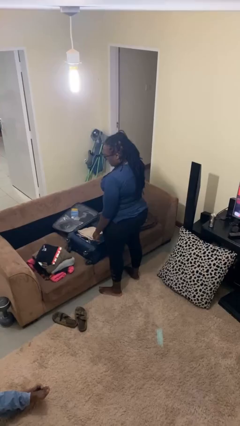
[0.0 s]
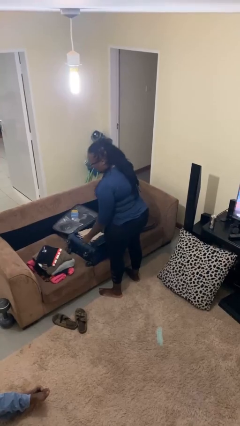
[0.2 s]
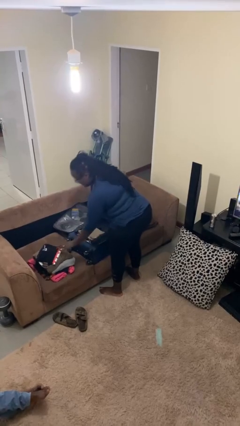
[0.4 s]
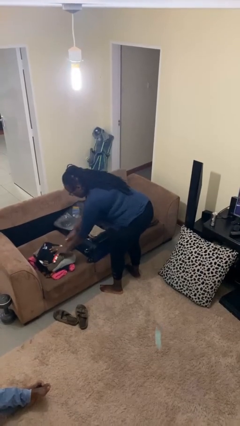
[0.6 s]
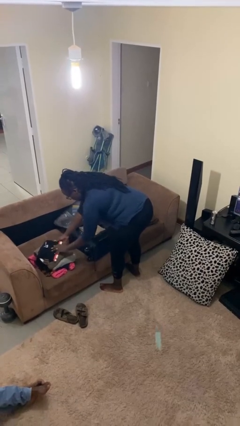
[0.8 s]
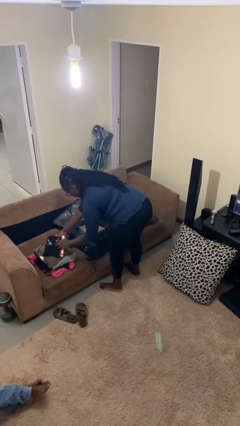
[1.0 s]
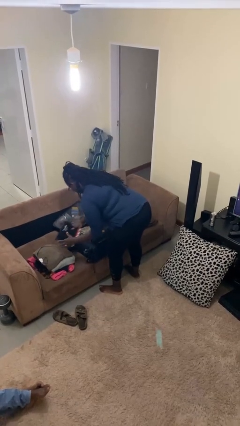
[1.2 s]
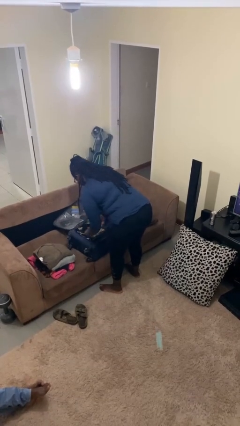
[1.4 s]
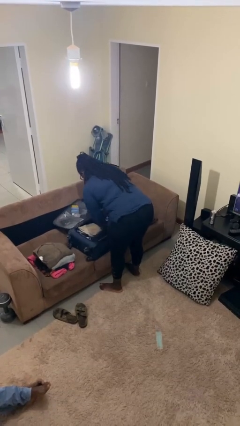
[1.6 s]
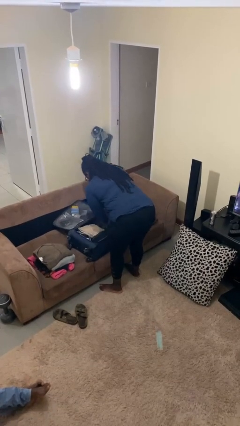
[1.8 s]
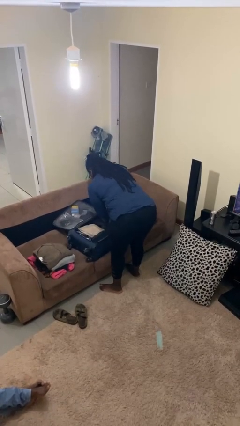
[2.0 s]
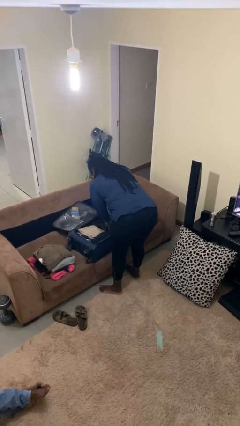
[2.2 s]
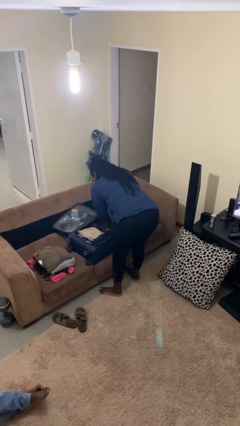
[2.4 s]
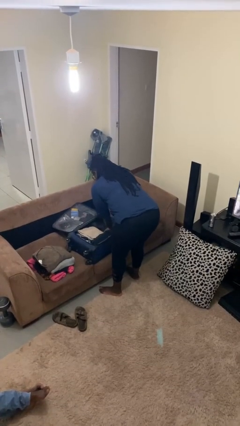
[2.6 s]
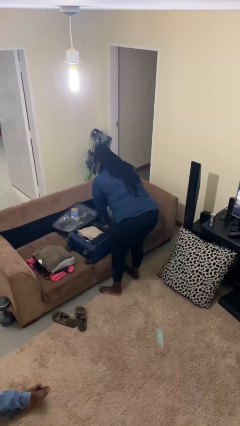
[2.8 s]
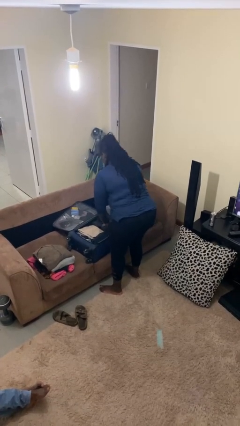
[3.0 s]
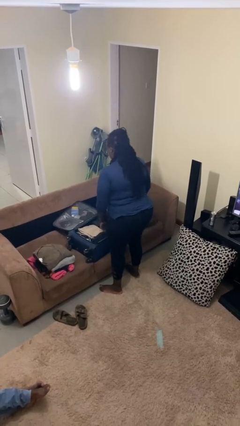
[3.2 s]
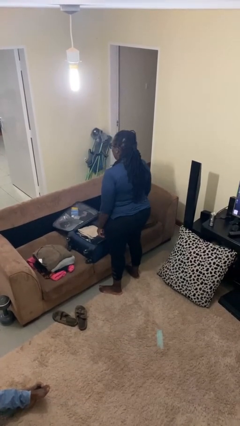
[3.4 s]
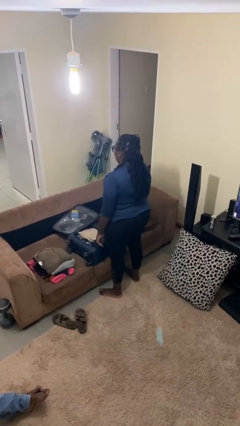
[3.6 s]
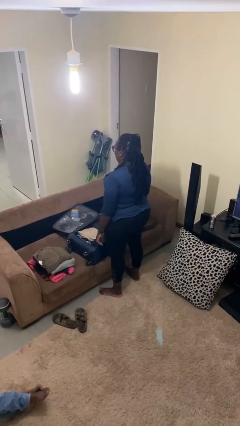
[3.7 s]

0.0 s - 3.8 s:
person loads clothes into suitcase

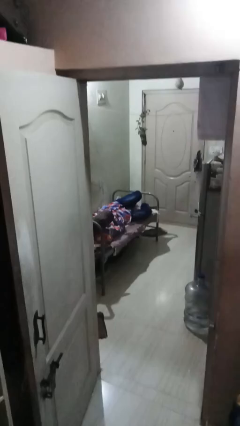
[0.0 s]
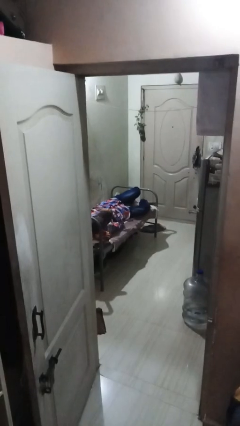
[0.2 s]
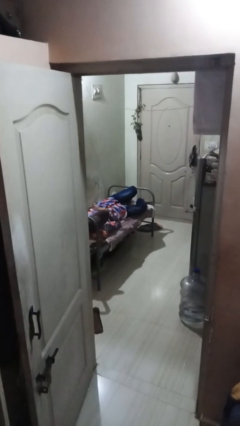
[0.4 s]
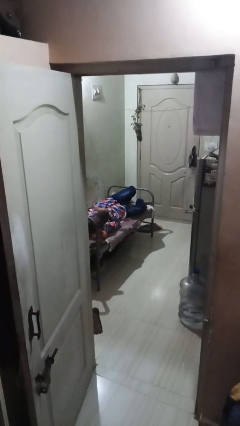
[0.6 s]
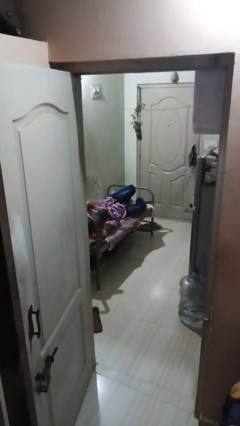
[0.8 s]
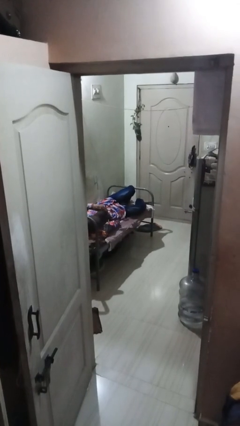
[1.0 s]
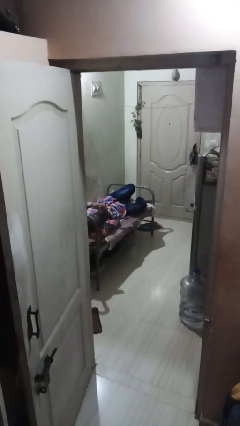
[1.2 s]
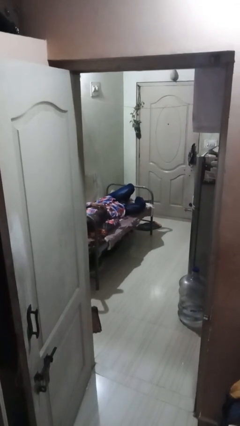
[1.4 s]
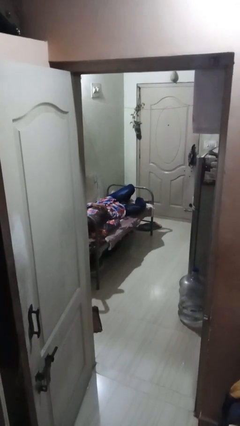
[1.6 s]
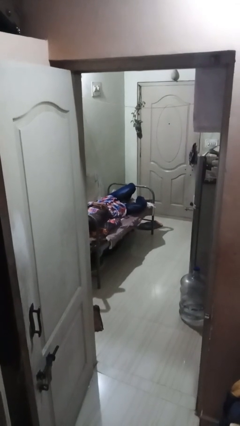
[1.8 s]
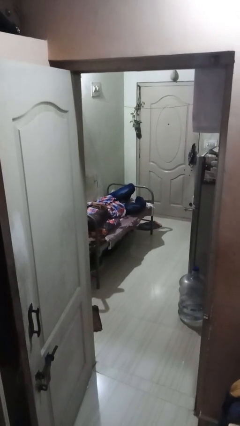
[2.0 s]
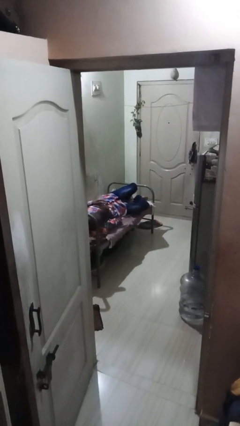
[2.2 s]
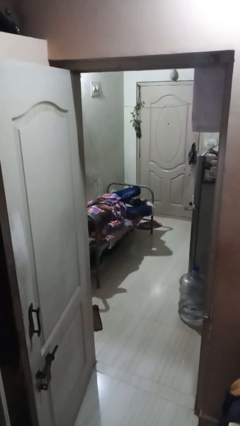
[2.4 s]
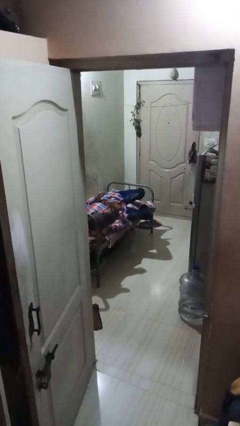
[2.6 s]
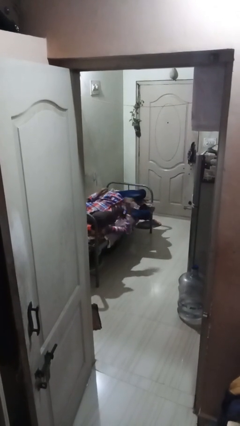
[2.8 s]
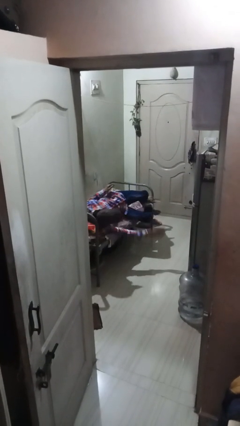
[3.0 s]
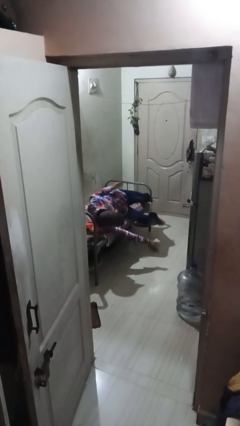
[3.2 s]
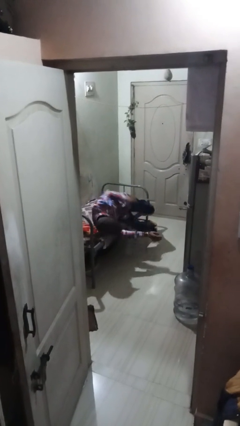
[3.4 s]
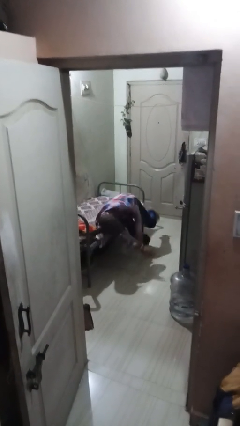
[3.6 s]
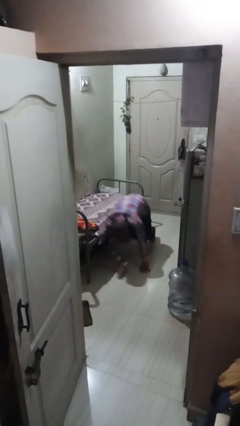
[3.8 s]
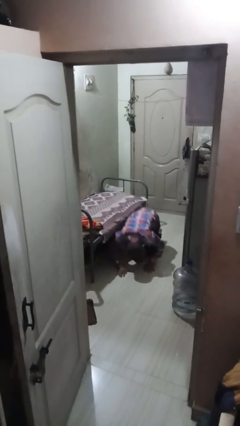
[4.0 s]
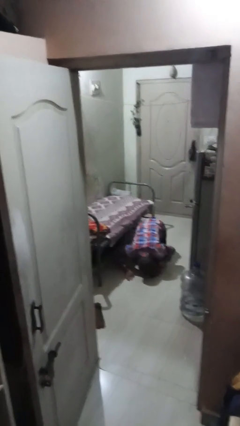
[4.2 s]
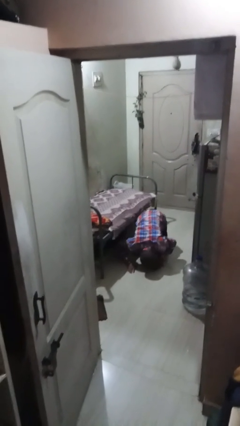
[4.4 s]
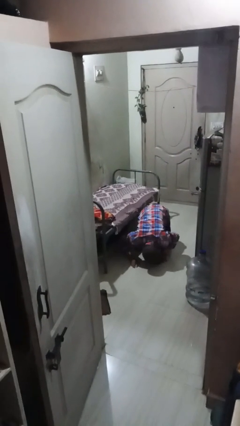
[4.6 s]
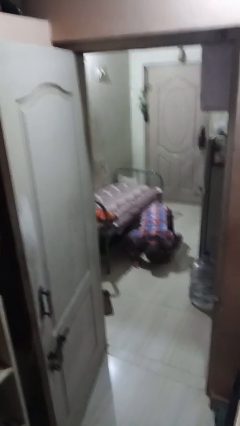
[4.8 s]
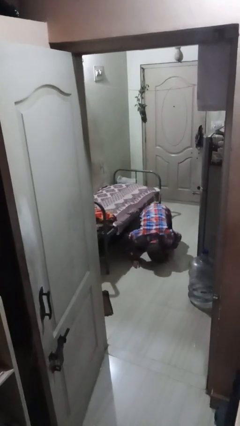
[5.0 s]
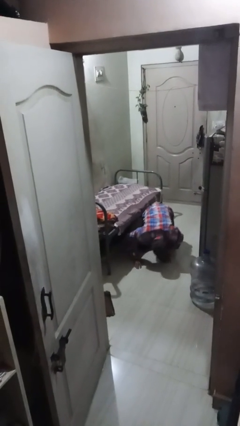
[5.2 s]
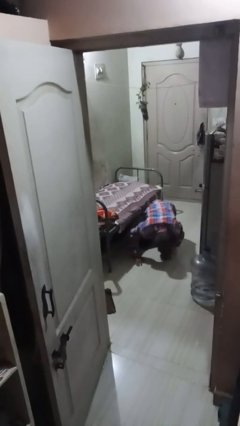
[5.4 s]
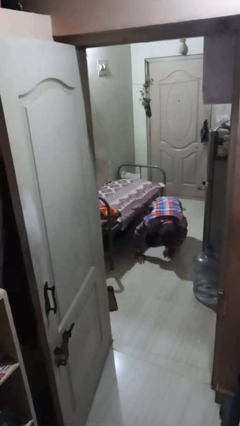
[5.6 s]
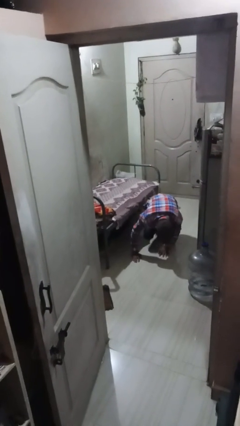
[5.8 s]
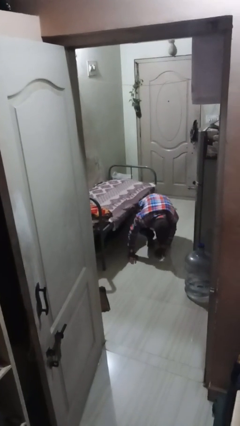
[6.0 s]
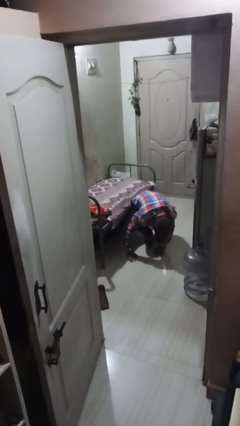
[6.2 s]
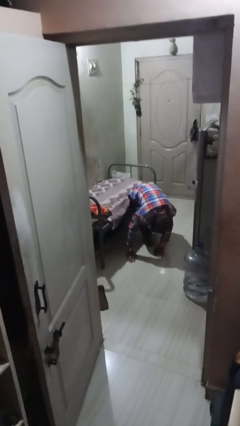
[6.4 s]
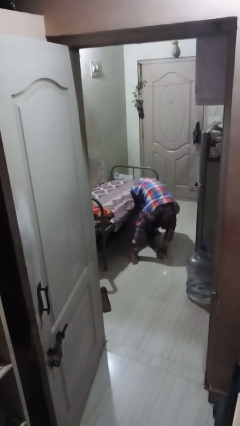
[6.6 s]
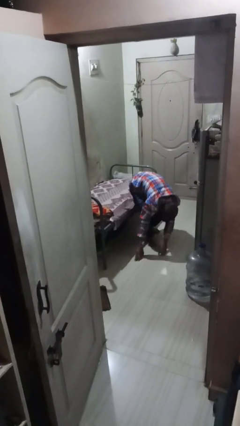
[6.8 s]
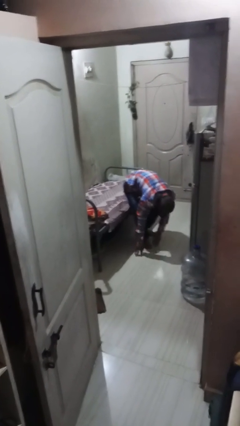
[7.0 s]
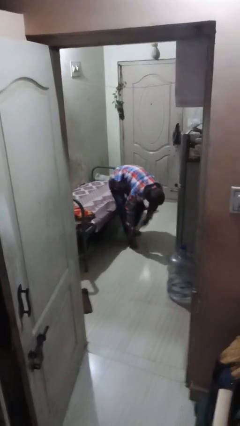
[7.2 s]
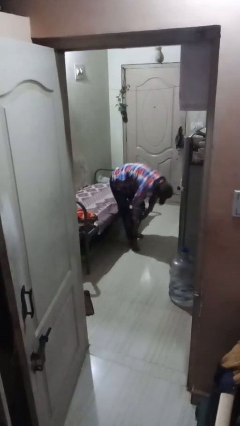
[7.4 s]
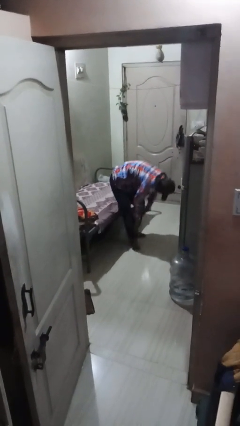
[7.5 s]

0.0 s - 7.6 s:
person falls from bed

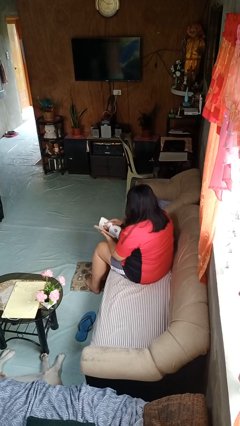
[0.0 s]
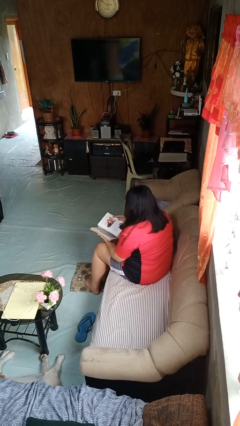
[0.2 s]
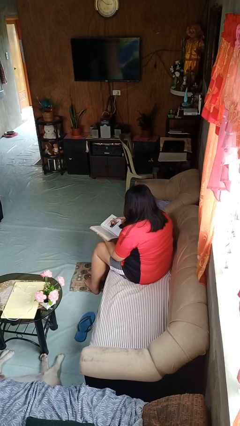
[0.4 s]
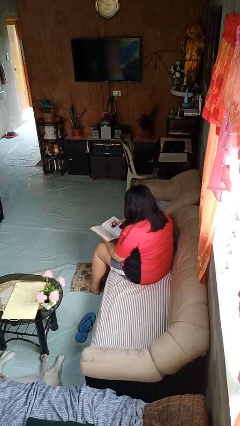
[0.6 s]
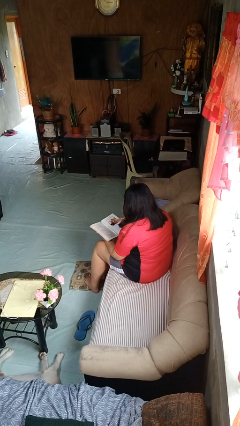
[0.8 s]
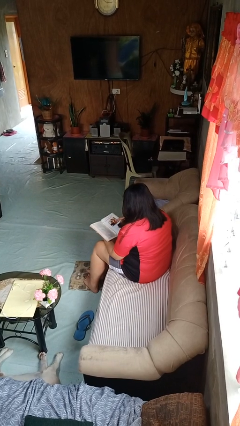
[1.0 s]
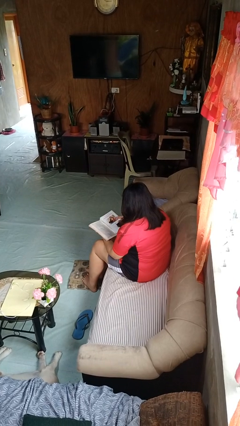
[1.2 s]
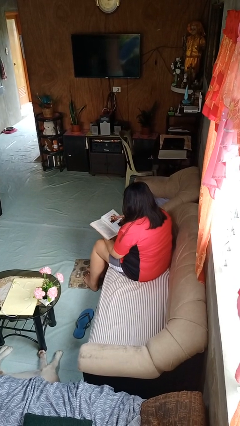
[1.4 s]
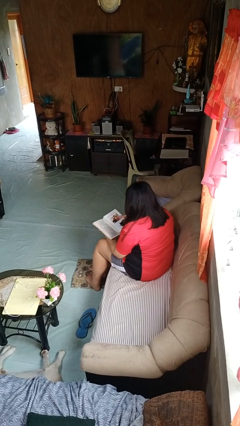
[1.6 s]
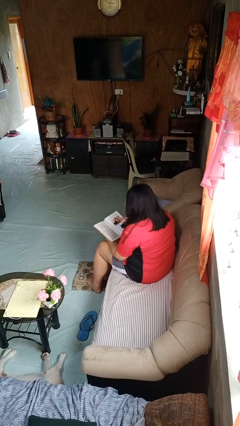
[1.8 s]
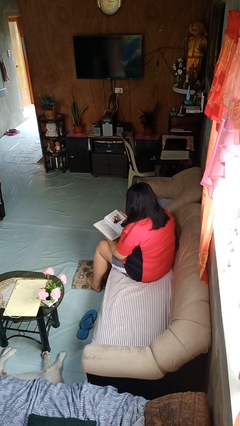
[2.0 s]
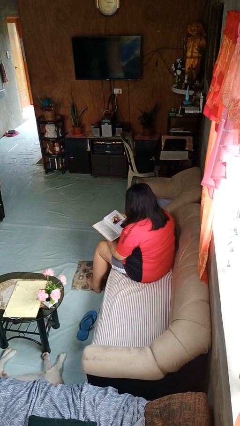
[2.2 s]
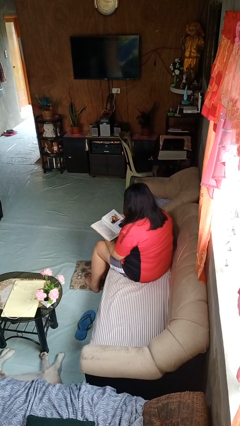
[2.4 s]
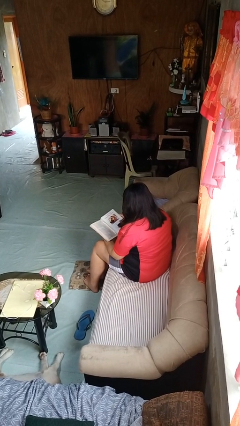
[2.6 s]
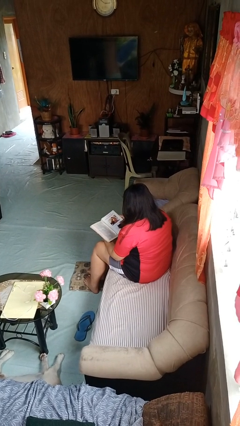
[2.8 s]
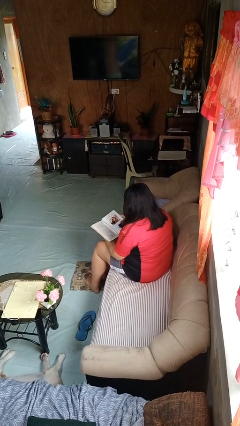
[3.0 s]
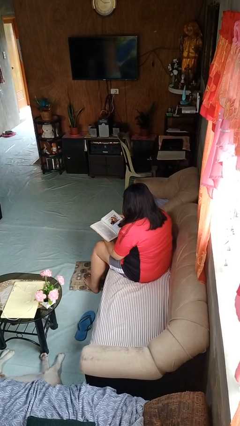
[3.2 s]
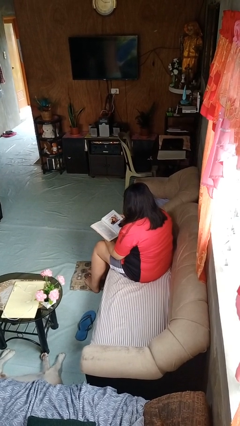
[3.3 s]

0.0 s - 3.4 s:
person reads book

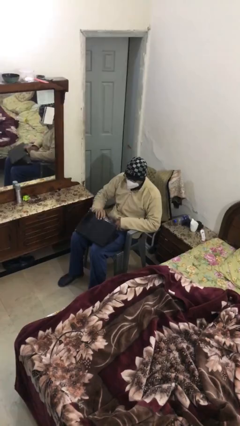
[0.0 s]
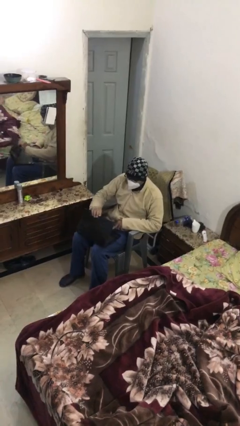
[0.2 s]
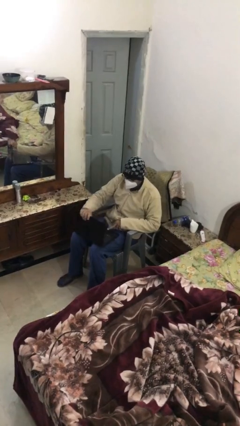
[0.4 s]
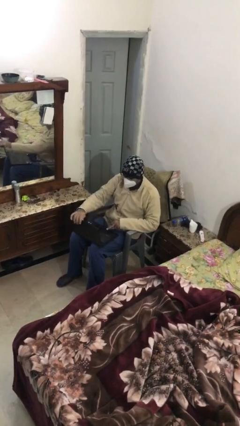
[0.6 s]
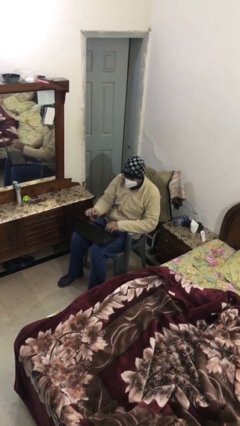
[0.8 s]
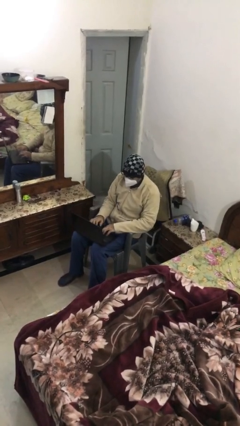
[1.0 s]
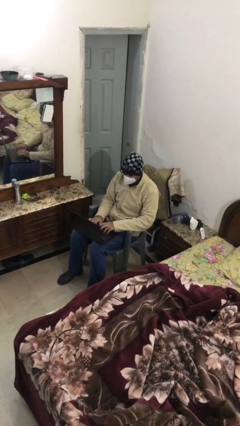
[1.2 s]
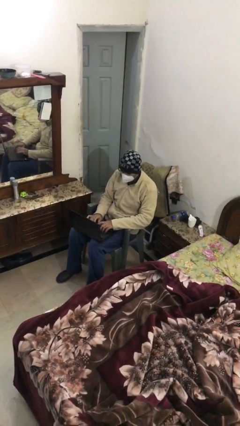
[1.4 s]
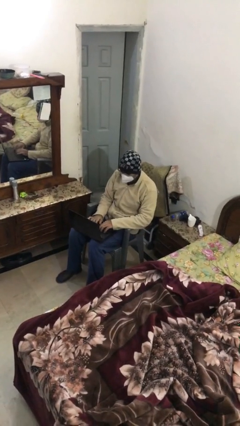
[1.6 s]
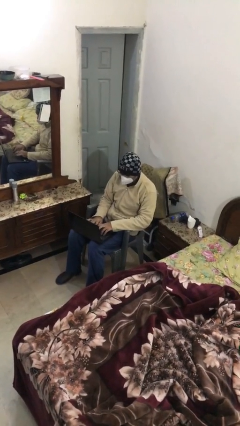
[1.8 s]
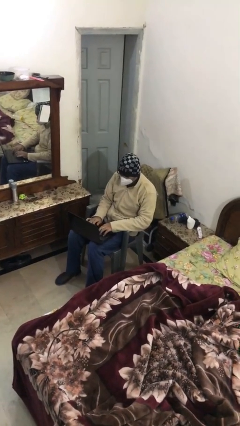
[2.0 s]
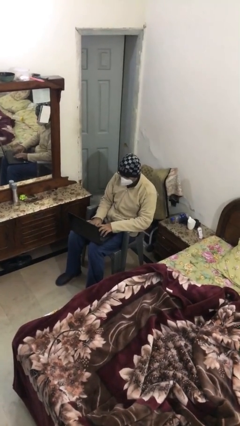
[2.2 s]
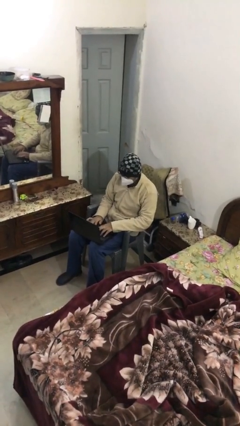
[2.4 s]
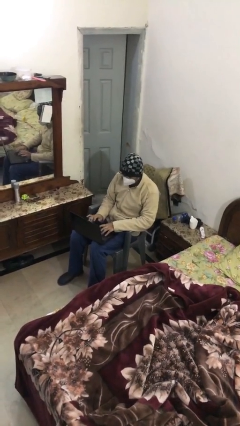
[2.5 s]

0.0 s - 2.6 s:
person interacts with laptop

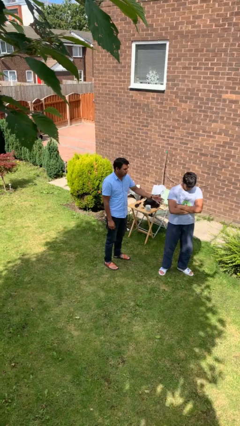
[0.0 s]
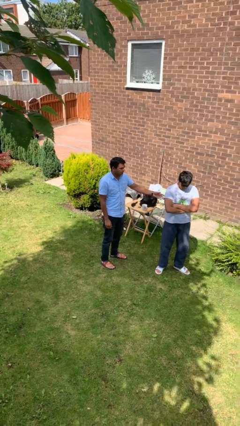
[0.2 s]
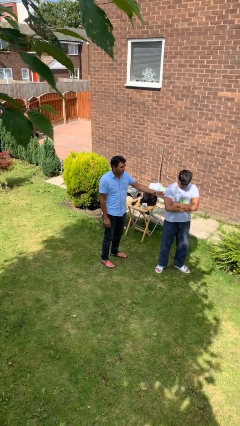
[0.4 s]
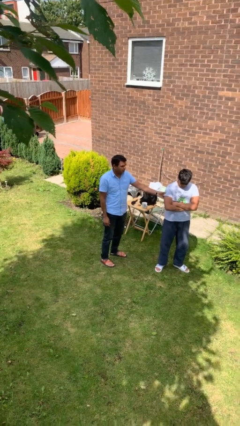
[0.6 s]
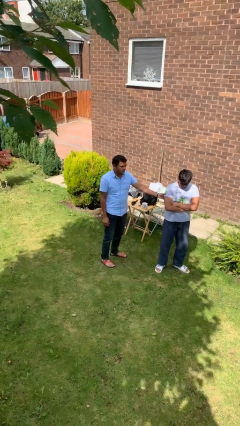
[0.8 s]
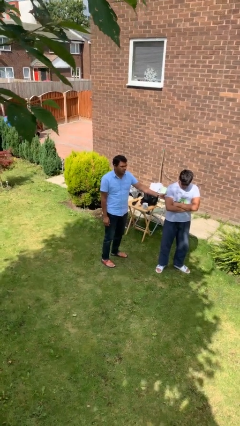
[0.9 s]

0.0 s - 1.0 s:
person grabs person by bicep
